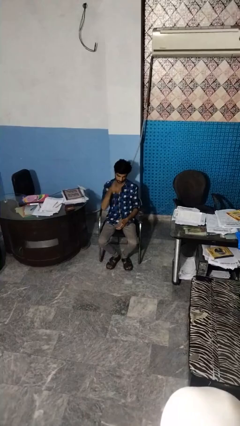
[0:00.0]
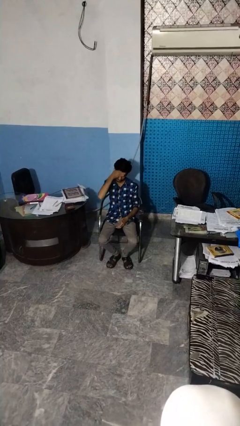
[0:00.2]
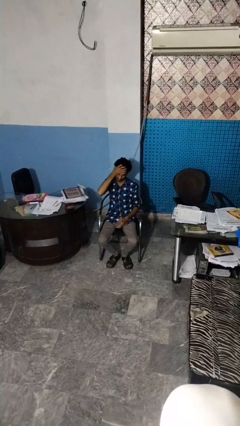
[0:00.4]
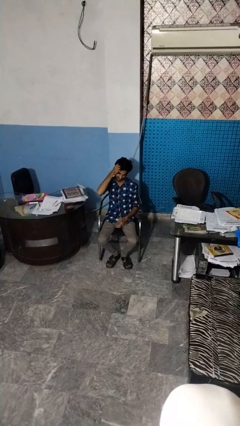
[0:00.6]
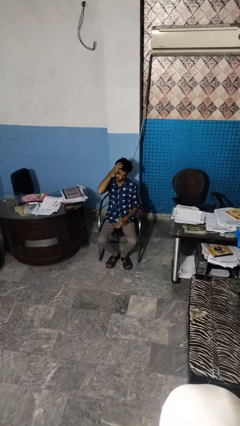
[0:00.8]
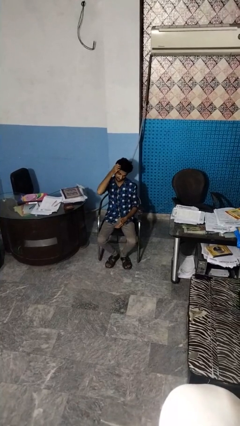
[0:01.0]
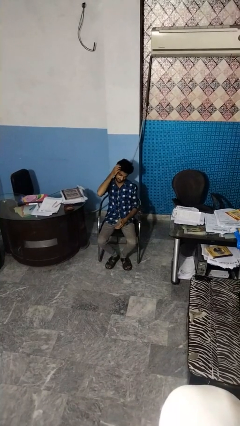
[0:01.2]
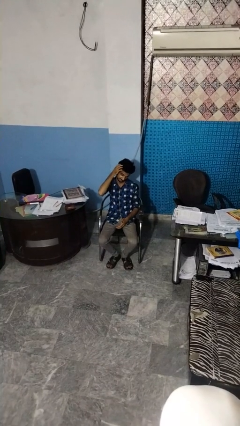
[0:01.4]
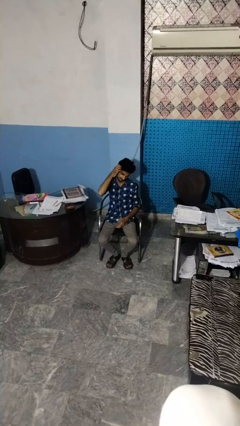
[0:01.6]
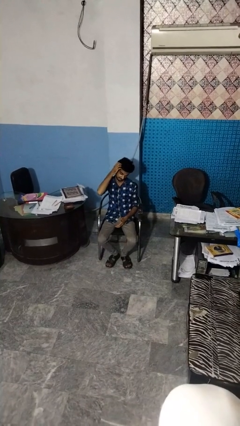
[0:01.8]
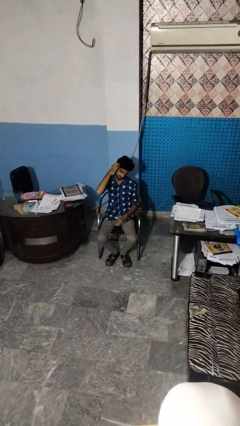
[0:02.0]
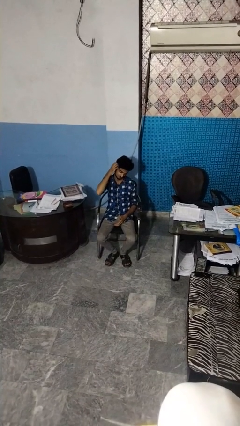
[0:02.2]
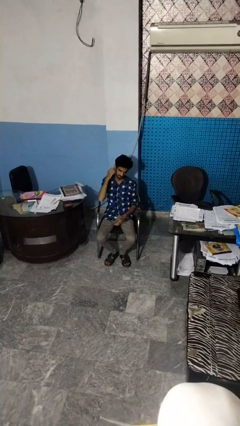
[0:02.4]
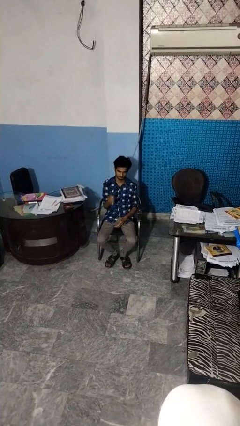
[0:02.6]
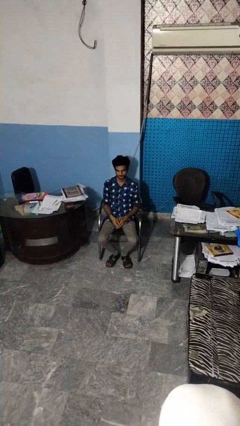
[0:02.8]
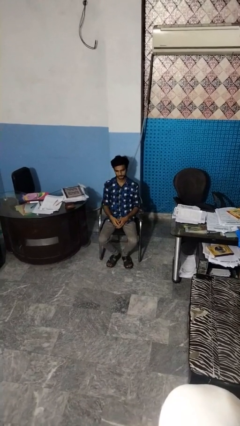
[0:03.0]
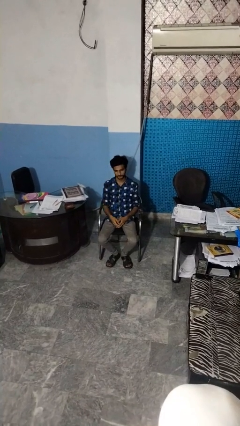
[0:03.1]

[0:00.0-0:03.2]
person scratches face

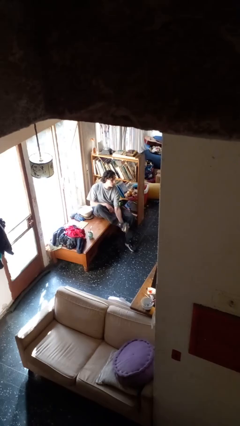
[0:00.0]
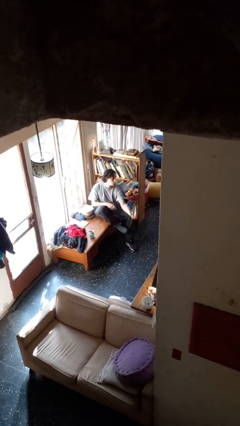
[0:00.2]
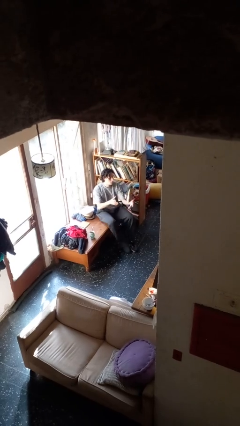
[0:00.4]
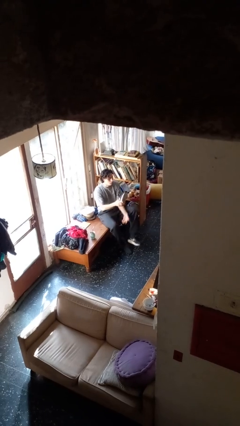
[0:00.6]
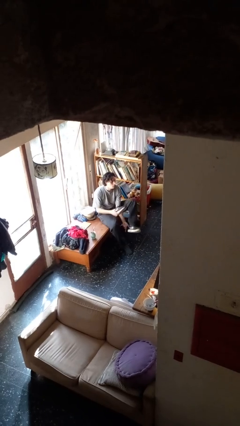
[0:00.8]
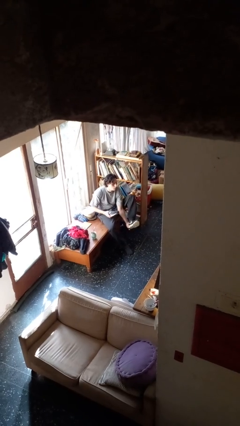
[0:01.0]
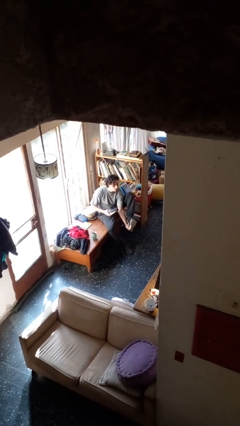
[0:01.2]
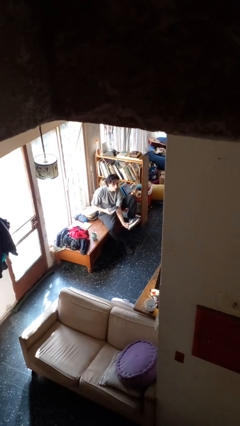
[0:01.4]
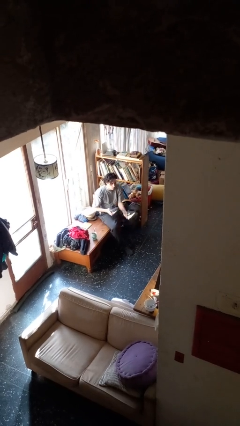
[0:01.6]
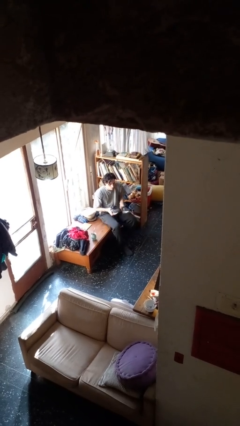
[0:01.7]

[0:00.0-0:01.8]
person takes off shoes

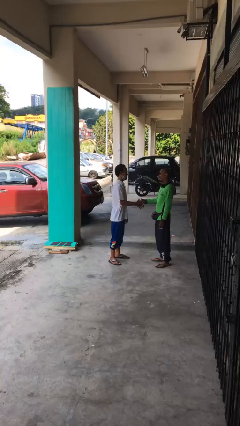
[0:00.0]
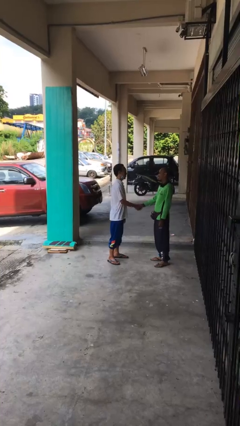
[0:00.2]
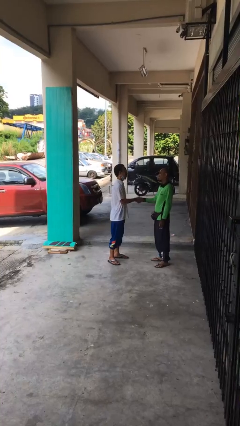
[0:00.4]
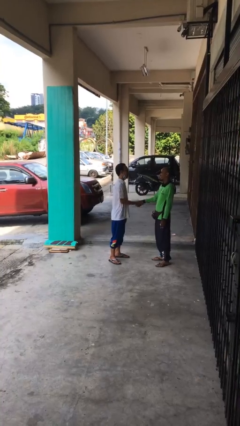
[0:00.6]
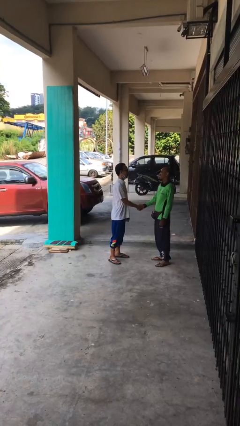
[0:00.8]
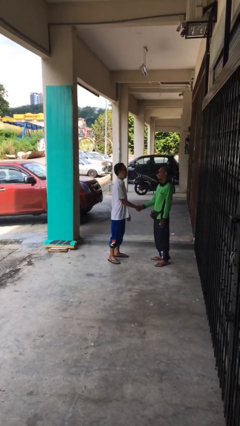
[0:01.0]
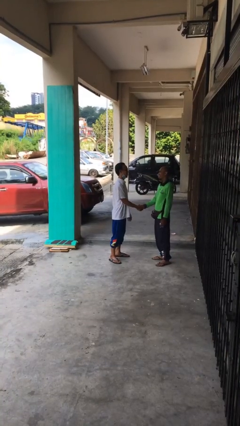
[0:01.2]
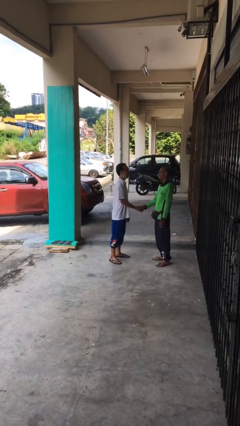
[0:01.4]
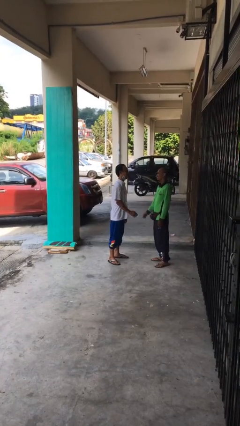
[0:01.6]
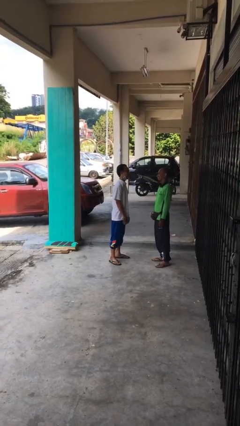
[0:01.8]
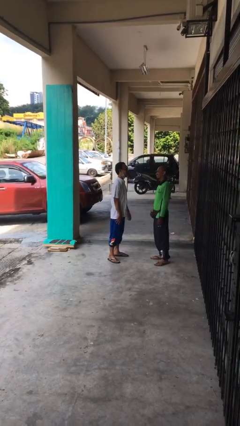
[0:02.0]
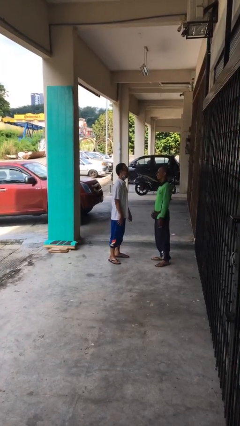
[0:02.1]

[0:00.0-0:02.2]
person shakes hand

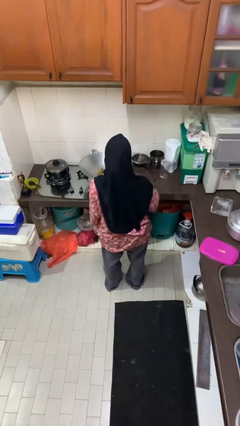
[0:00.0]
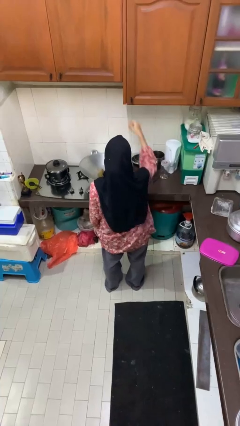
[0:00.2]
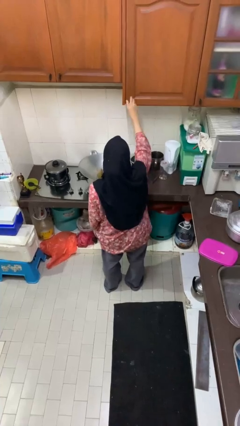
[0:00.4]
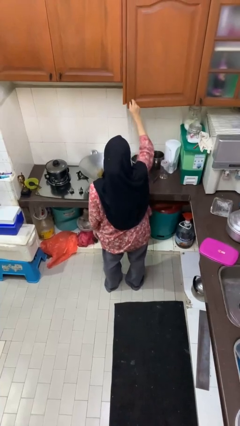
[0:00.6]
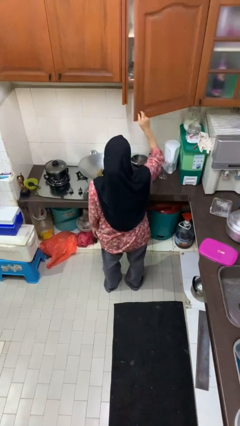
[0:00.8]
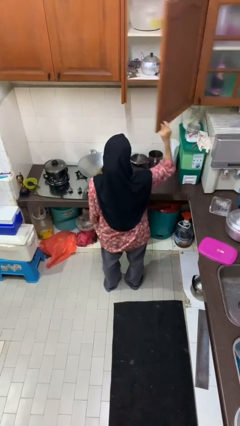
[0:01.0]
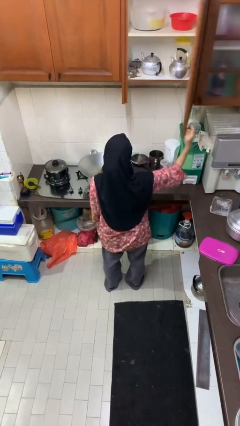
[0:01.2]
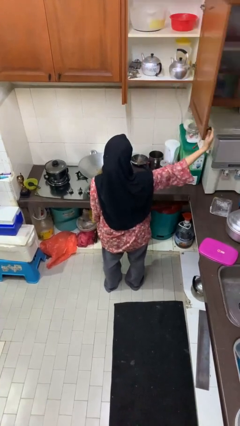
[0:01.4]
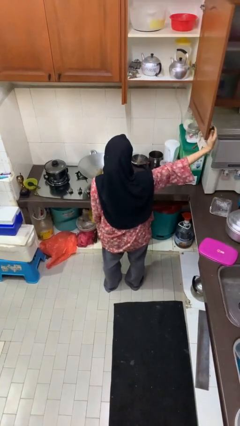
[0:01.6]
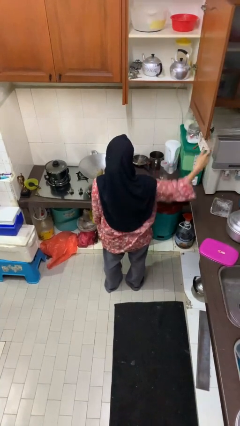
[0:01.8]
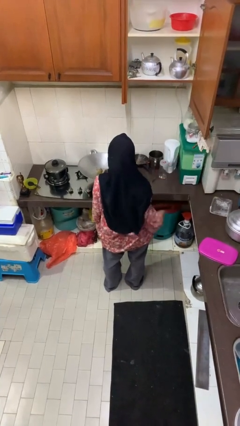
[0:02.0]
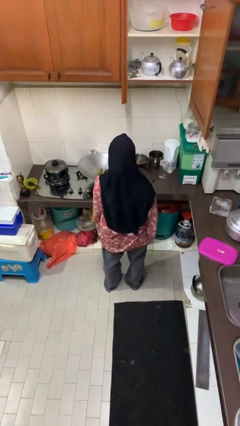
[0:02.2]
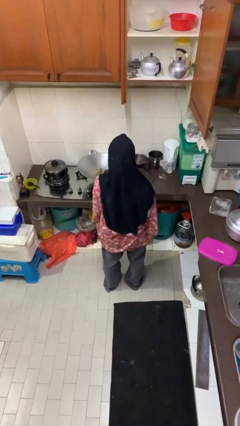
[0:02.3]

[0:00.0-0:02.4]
person opens cabinet

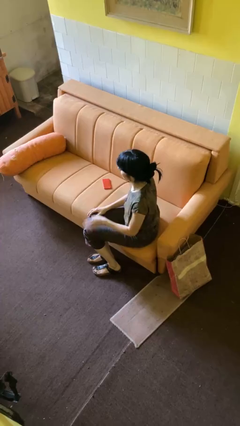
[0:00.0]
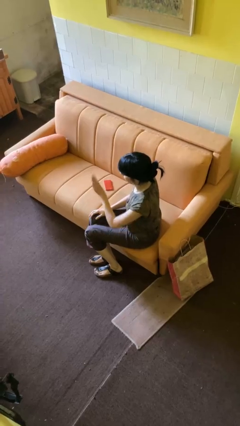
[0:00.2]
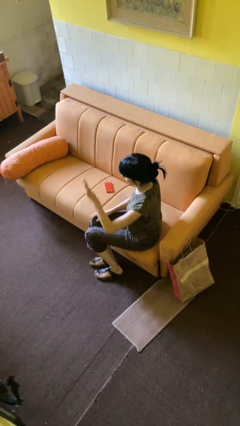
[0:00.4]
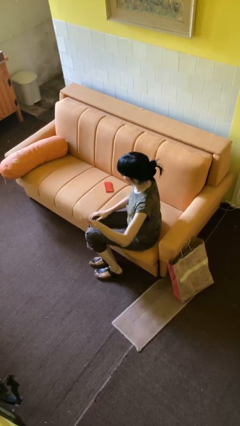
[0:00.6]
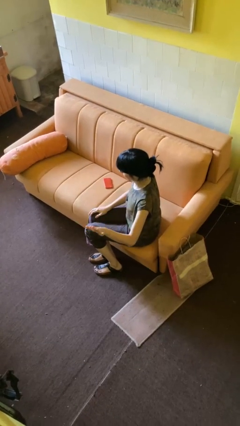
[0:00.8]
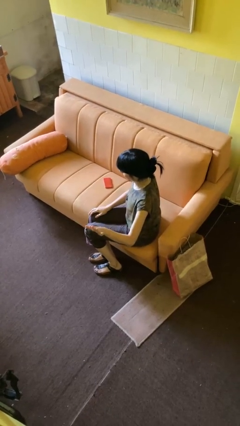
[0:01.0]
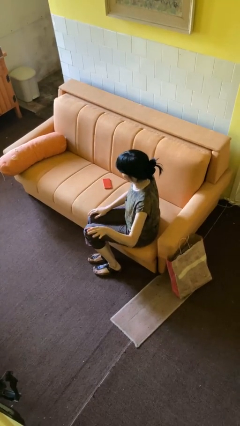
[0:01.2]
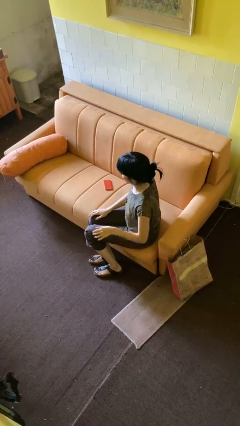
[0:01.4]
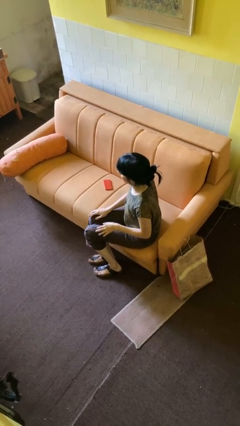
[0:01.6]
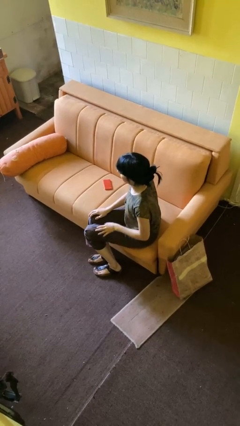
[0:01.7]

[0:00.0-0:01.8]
person gestures swipe left

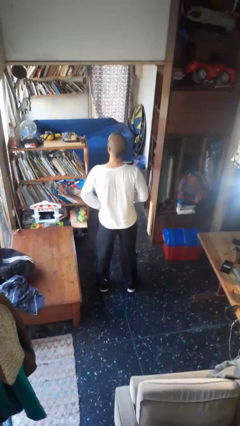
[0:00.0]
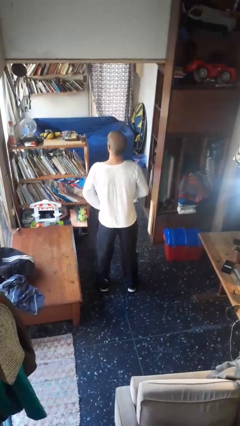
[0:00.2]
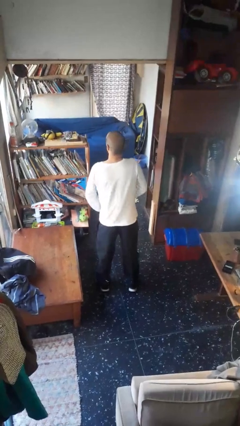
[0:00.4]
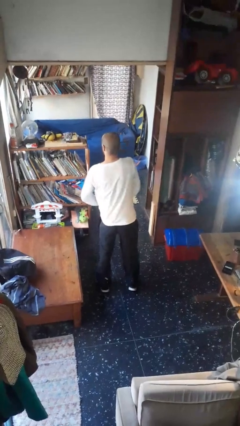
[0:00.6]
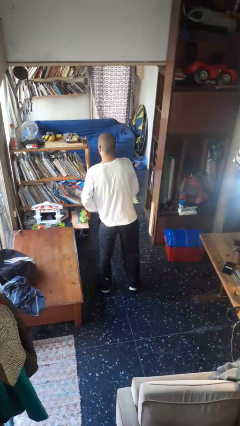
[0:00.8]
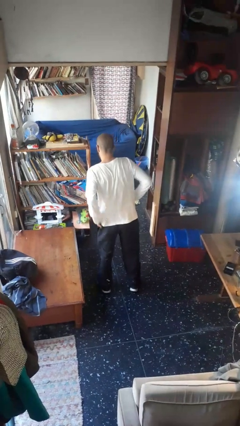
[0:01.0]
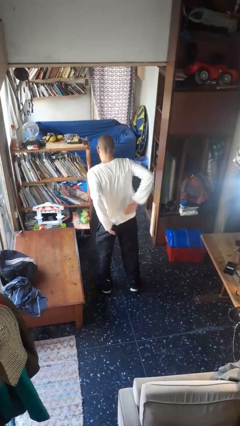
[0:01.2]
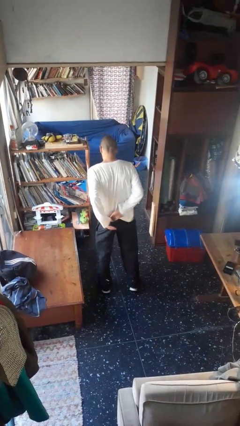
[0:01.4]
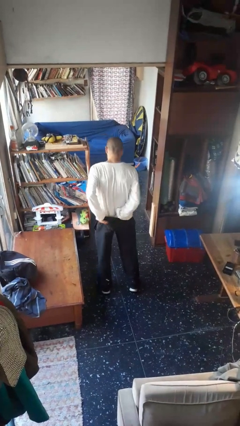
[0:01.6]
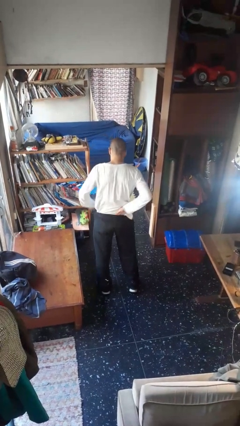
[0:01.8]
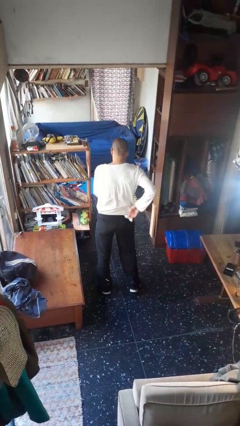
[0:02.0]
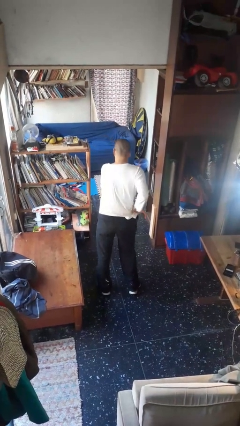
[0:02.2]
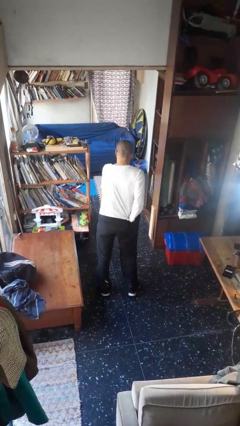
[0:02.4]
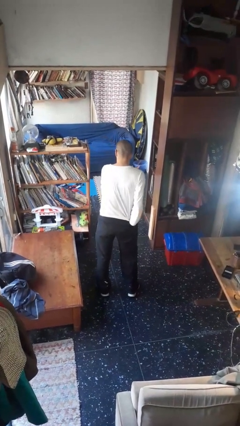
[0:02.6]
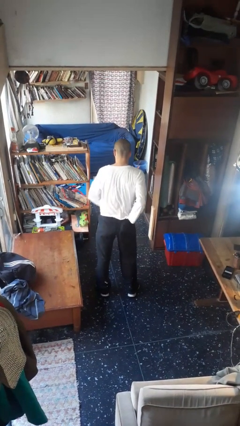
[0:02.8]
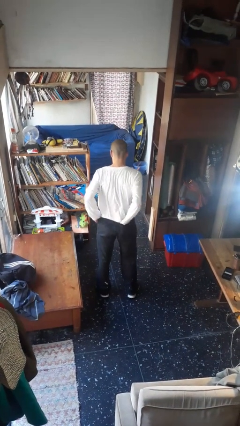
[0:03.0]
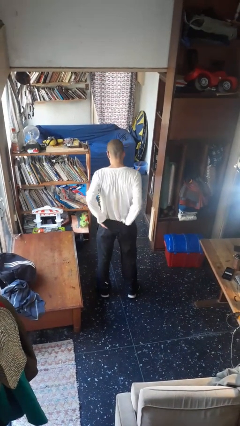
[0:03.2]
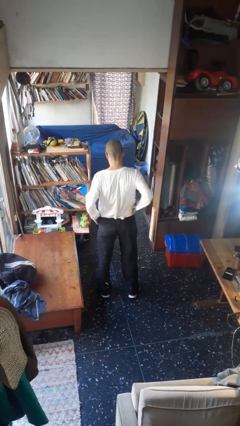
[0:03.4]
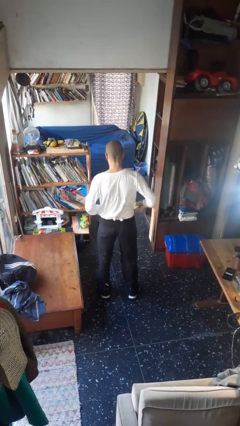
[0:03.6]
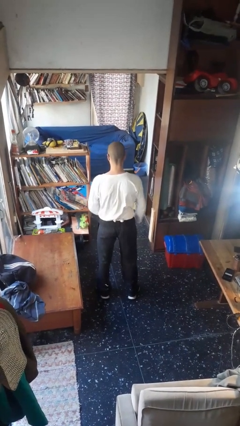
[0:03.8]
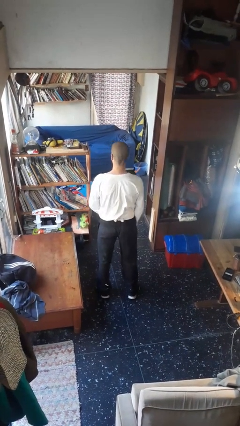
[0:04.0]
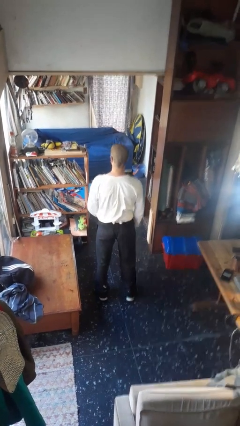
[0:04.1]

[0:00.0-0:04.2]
person tucks in shirt

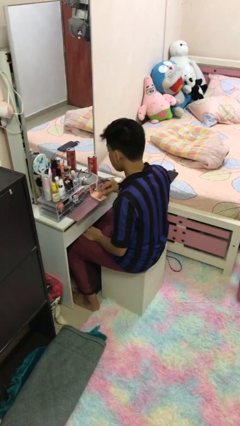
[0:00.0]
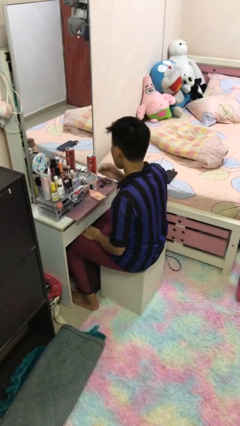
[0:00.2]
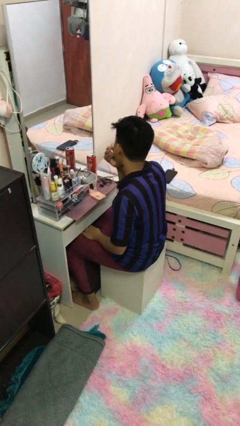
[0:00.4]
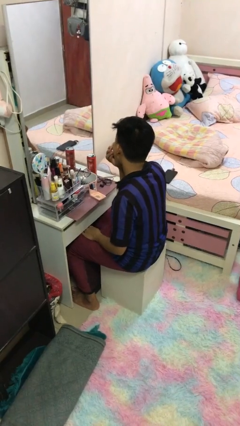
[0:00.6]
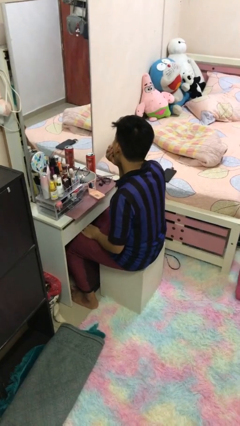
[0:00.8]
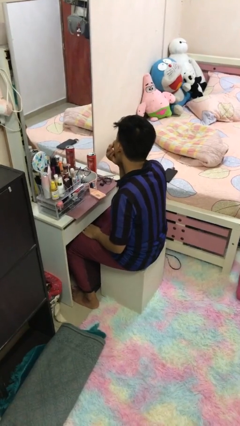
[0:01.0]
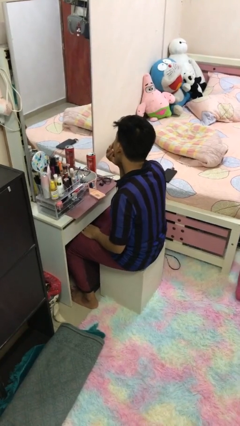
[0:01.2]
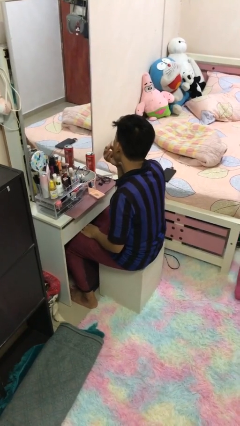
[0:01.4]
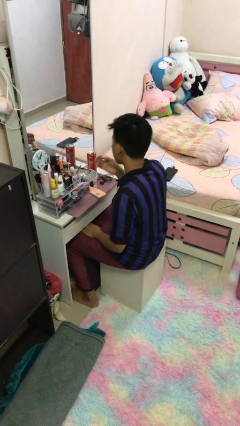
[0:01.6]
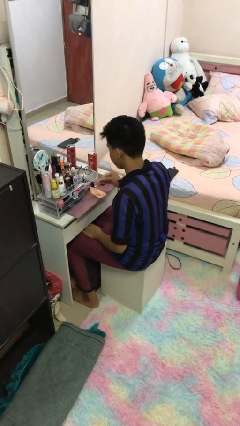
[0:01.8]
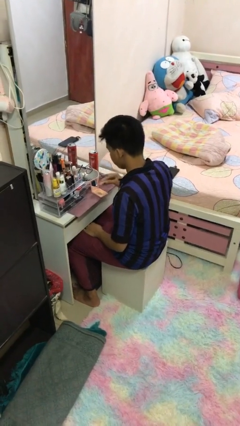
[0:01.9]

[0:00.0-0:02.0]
person applies foundation makeup
